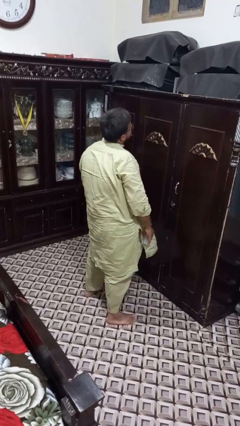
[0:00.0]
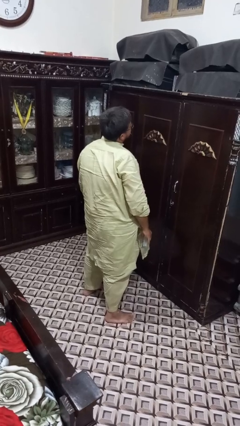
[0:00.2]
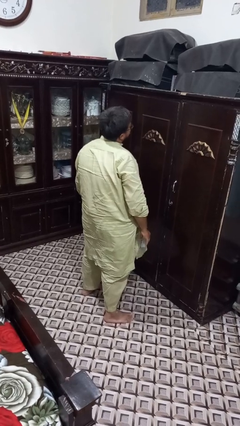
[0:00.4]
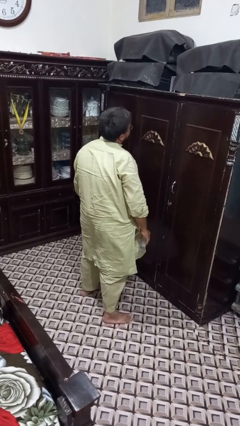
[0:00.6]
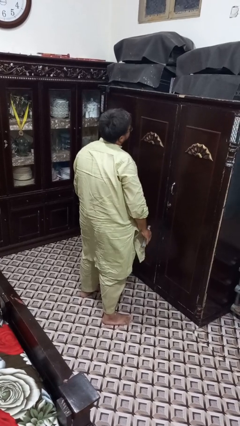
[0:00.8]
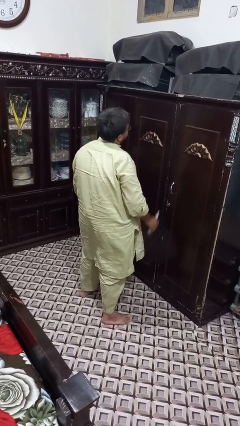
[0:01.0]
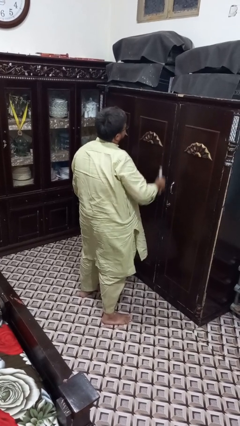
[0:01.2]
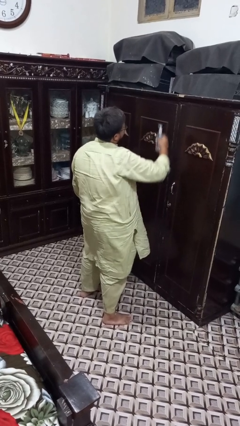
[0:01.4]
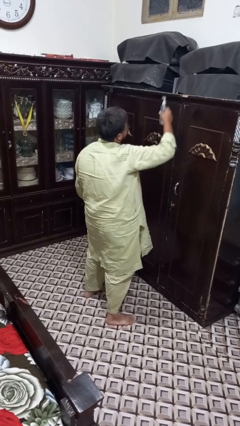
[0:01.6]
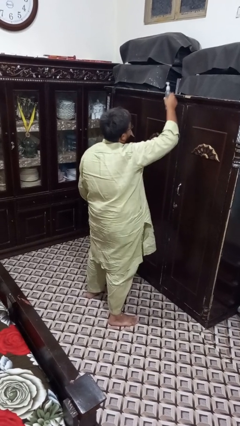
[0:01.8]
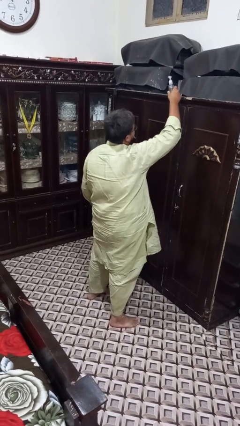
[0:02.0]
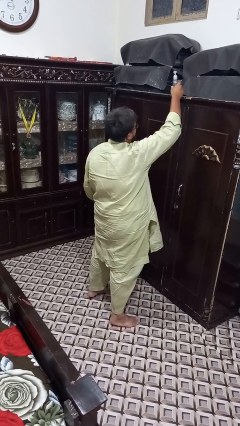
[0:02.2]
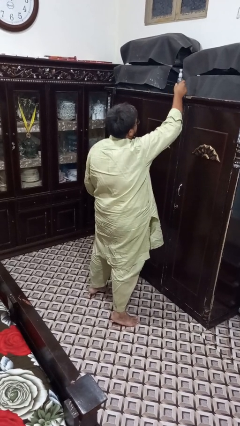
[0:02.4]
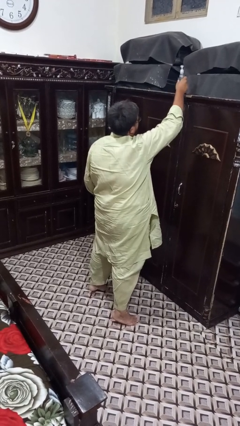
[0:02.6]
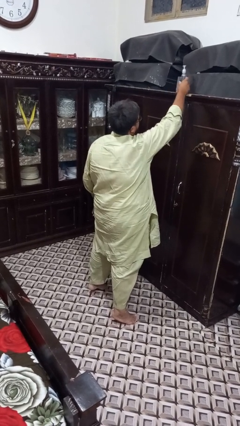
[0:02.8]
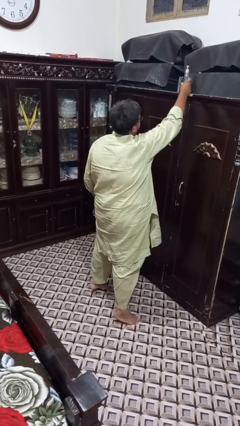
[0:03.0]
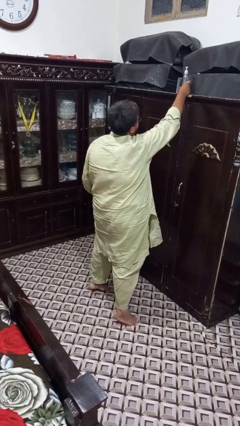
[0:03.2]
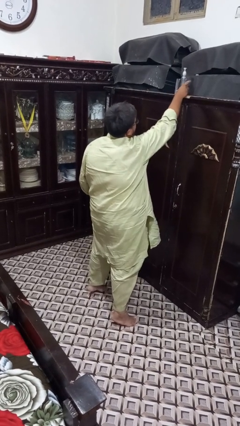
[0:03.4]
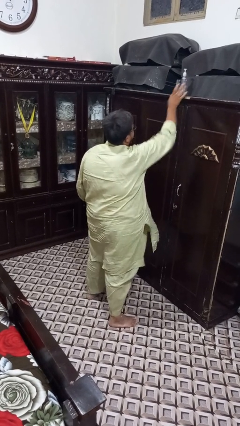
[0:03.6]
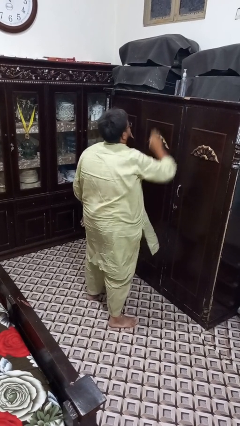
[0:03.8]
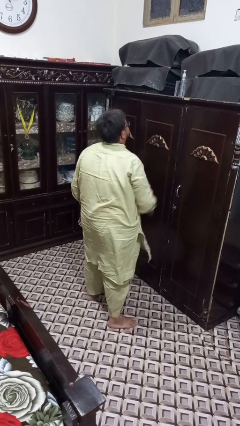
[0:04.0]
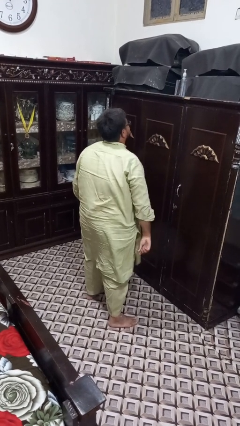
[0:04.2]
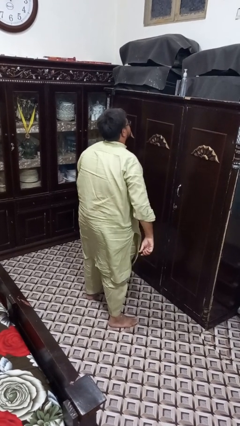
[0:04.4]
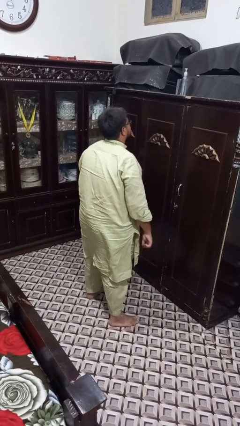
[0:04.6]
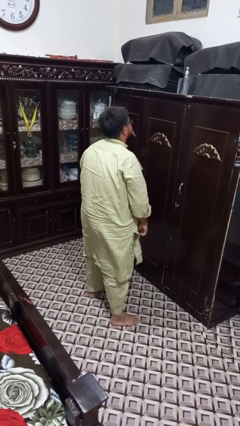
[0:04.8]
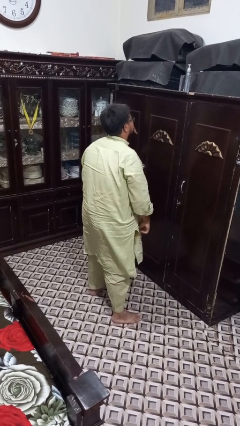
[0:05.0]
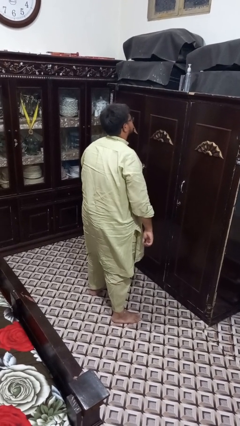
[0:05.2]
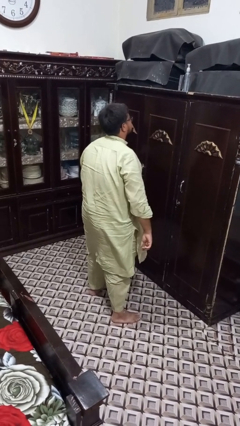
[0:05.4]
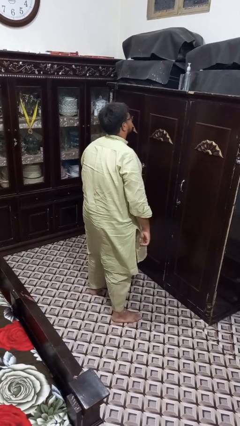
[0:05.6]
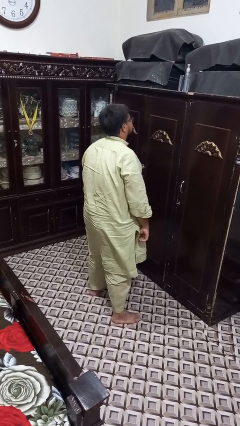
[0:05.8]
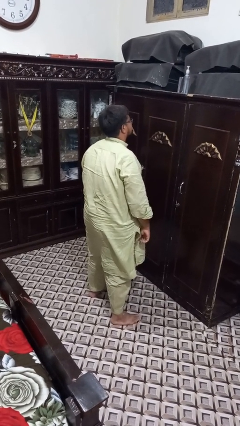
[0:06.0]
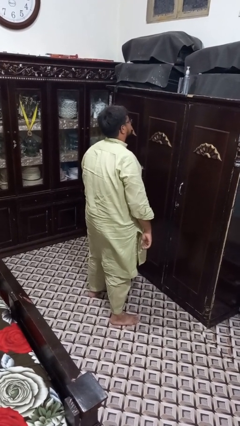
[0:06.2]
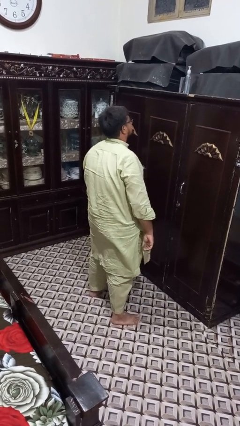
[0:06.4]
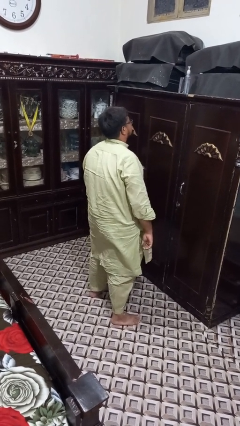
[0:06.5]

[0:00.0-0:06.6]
person puts down object into cabinet

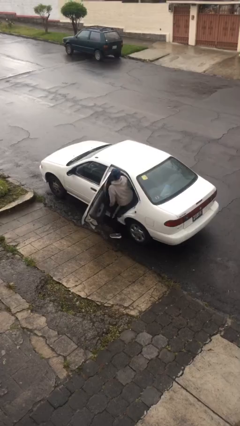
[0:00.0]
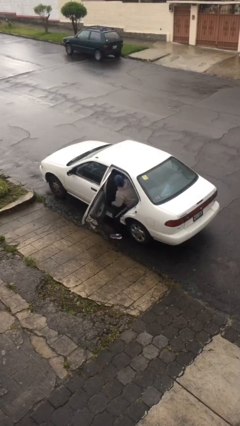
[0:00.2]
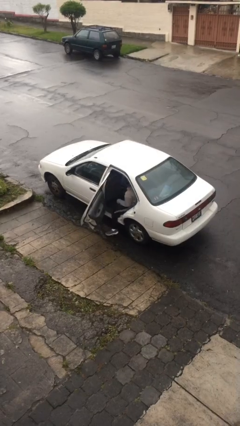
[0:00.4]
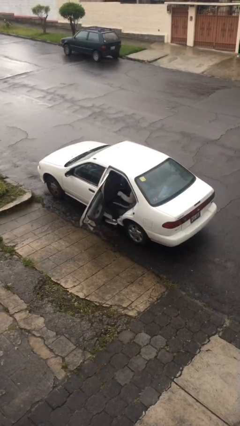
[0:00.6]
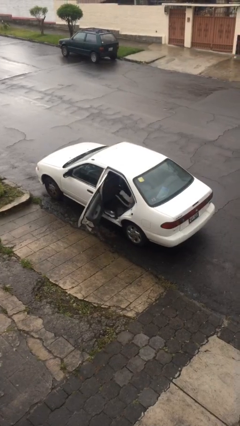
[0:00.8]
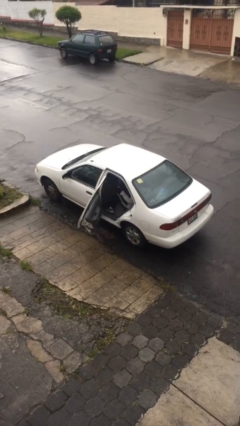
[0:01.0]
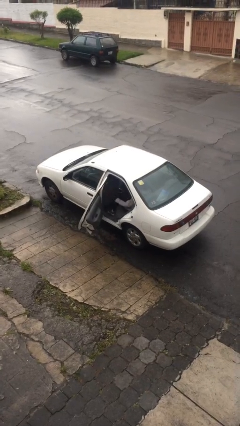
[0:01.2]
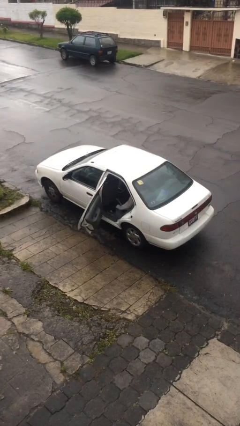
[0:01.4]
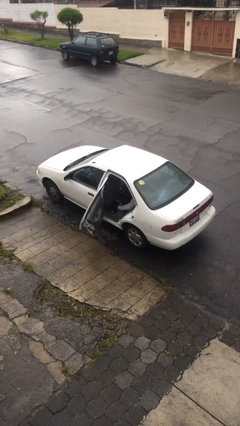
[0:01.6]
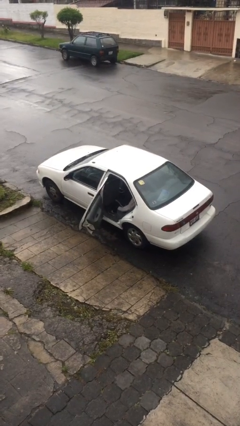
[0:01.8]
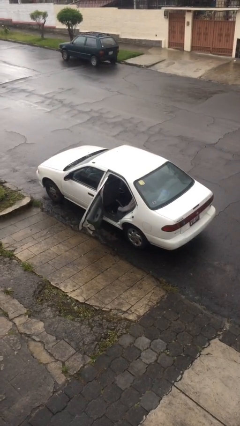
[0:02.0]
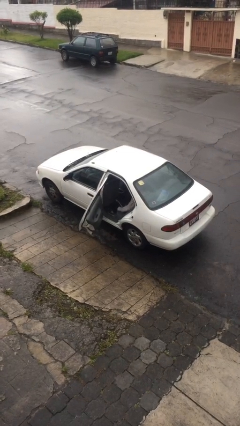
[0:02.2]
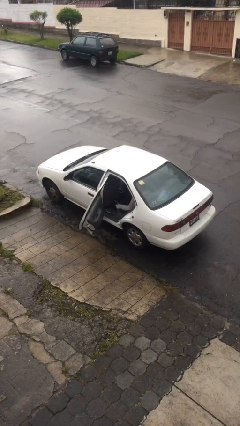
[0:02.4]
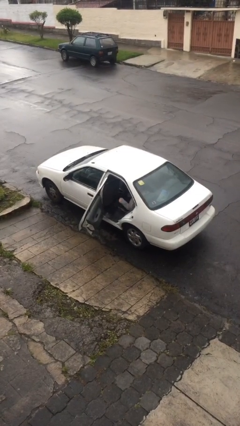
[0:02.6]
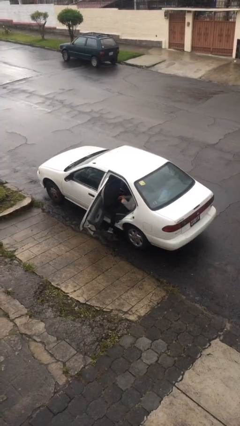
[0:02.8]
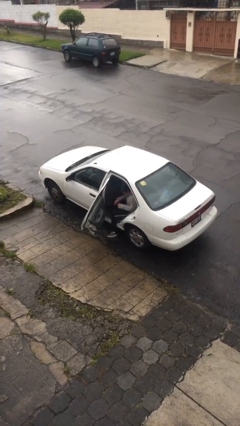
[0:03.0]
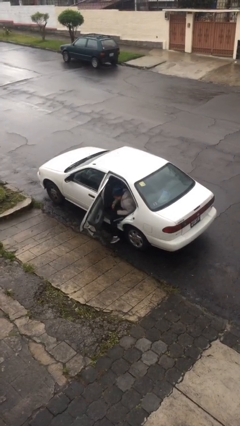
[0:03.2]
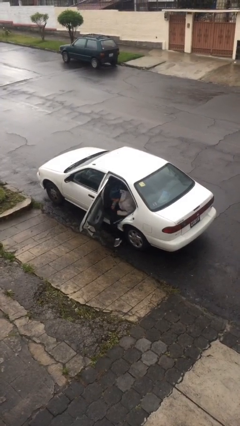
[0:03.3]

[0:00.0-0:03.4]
person enters car

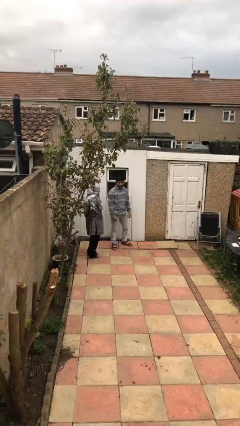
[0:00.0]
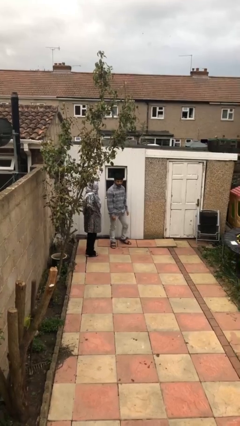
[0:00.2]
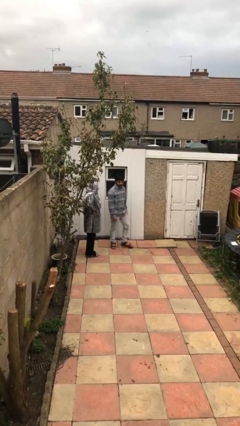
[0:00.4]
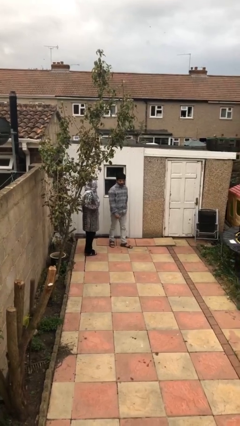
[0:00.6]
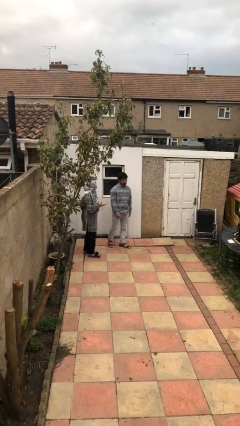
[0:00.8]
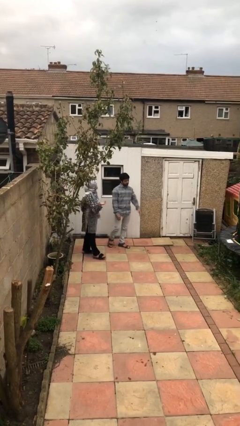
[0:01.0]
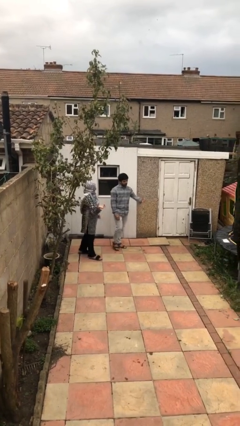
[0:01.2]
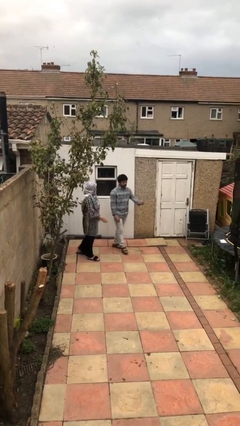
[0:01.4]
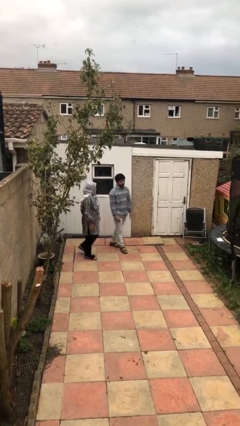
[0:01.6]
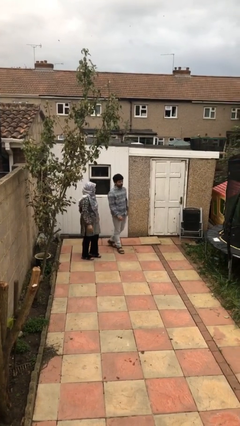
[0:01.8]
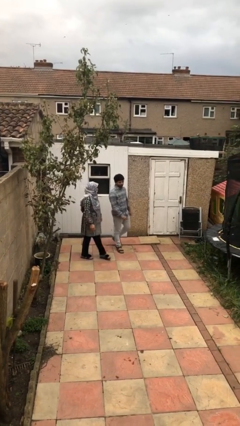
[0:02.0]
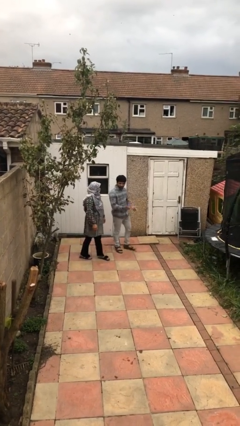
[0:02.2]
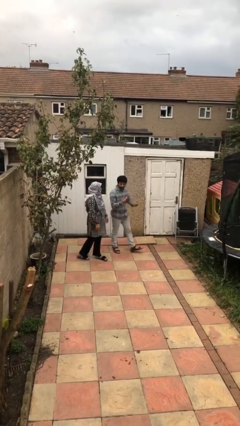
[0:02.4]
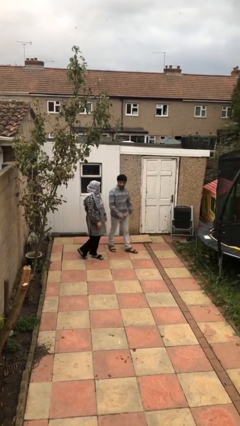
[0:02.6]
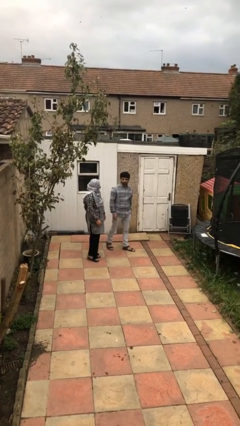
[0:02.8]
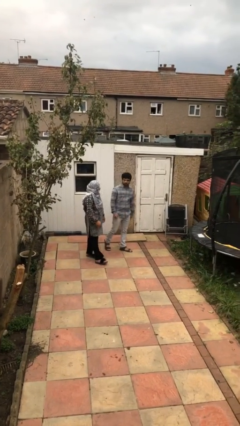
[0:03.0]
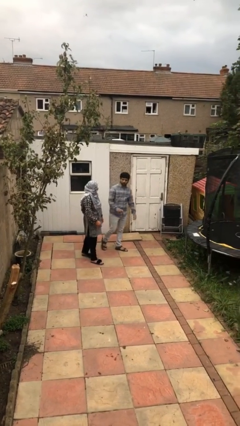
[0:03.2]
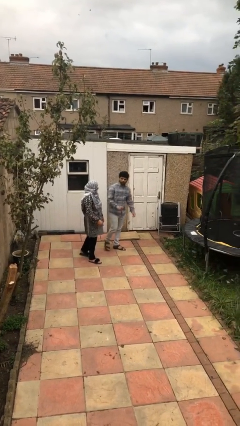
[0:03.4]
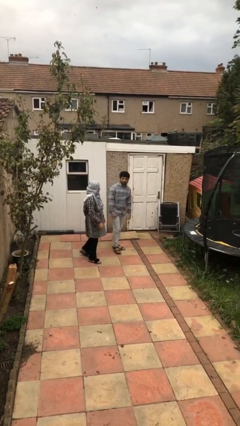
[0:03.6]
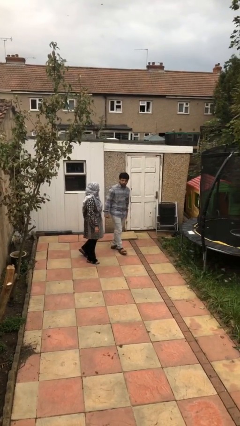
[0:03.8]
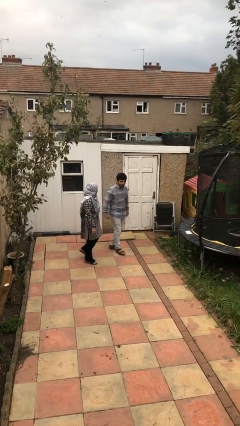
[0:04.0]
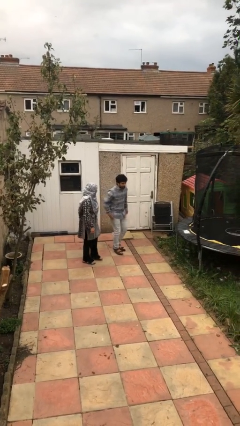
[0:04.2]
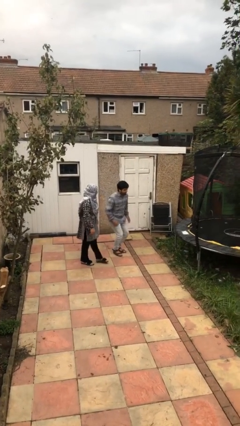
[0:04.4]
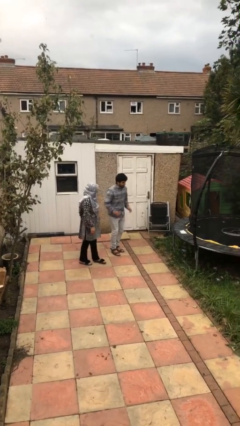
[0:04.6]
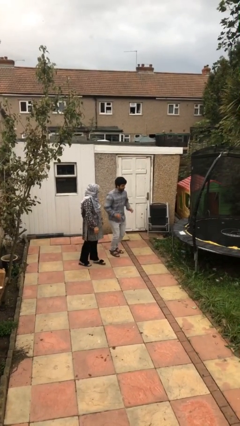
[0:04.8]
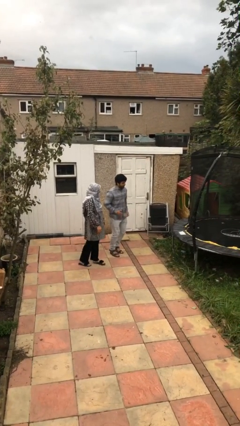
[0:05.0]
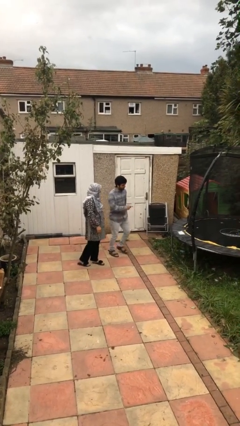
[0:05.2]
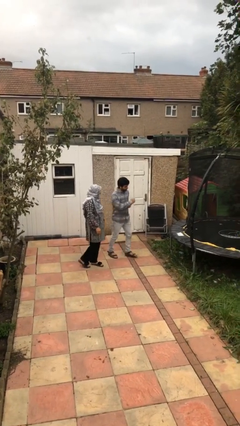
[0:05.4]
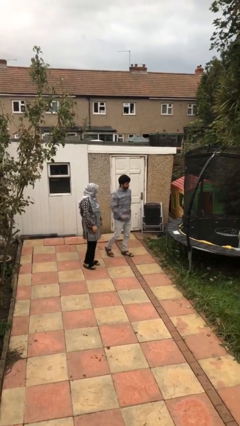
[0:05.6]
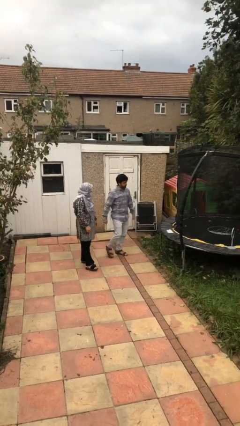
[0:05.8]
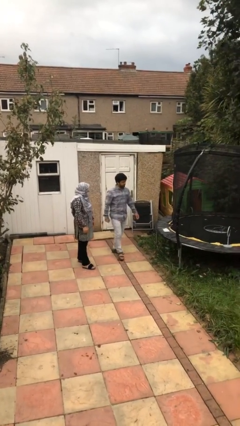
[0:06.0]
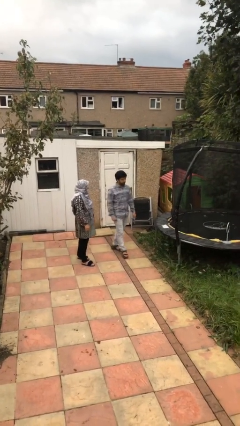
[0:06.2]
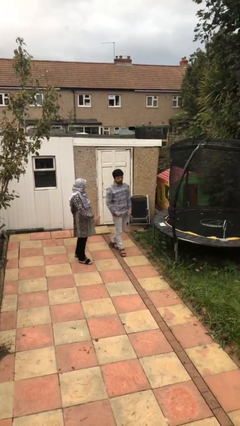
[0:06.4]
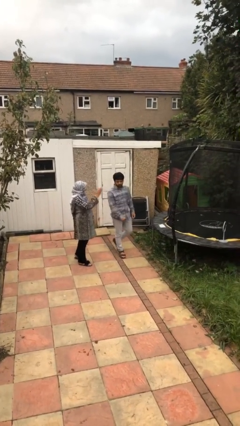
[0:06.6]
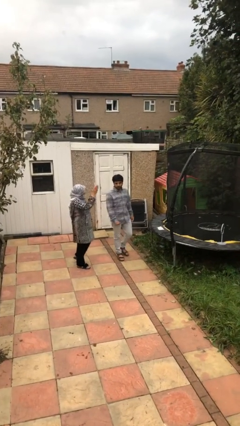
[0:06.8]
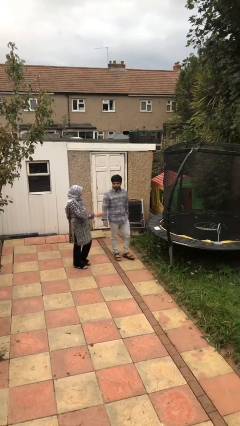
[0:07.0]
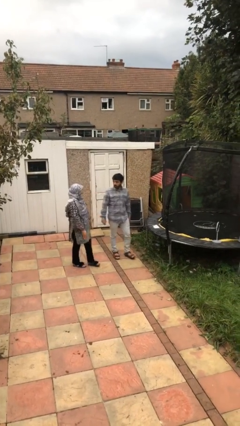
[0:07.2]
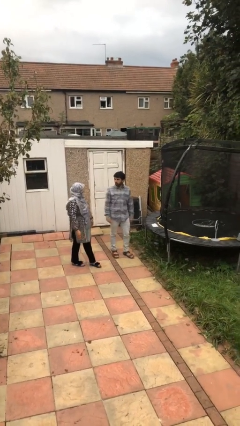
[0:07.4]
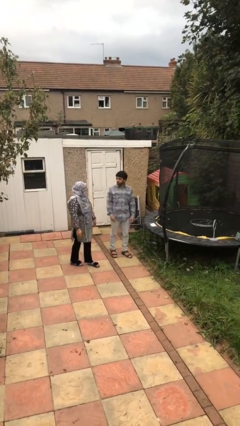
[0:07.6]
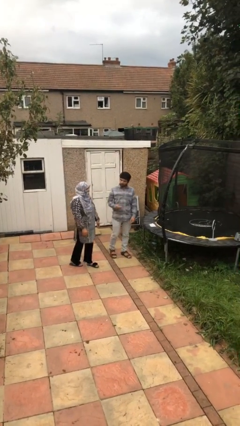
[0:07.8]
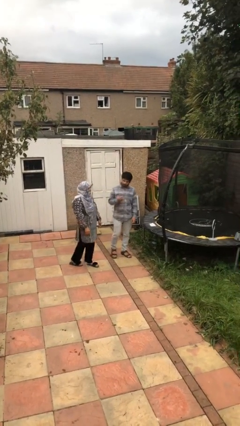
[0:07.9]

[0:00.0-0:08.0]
person talks to person
